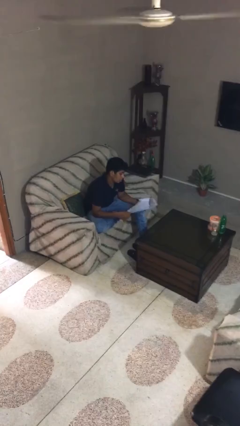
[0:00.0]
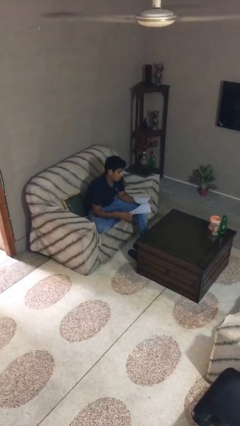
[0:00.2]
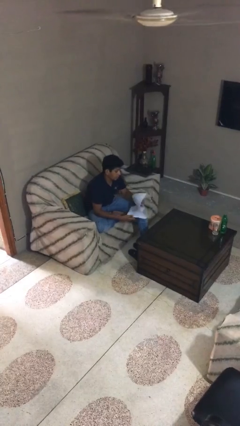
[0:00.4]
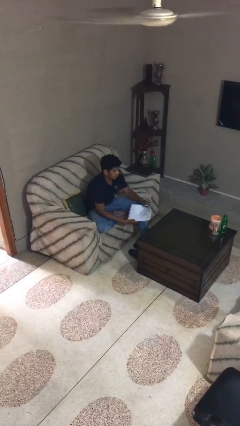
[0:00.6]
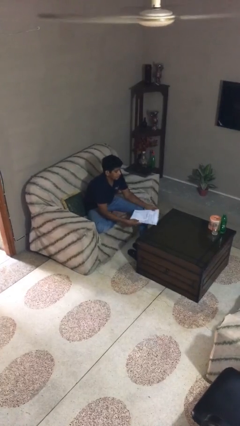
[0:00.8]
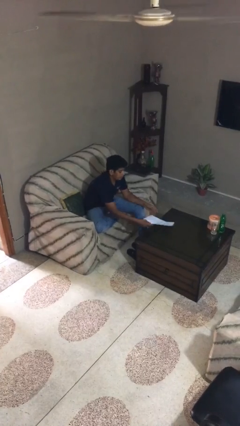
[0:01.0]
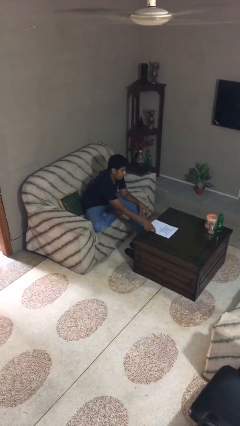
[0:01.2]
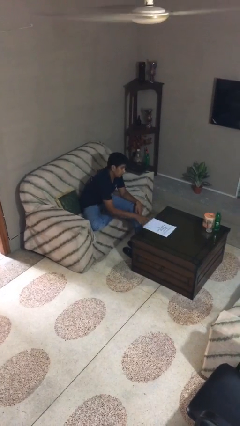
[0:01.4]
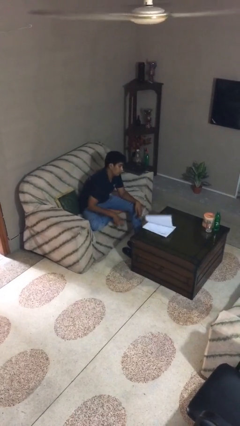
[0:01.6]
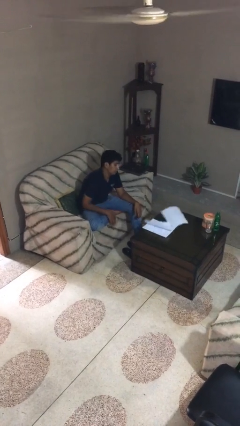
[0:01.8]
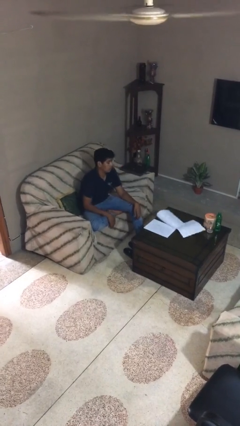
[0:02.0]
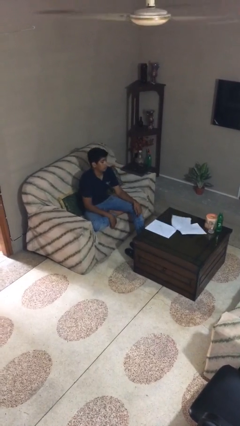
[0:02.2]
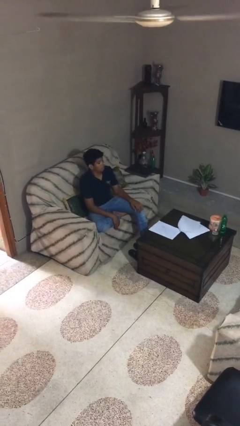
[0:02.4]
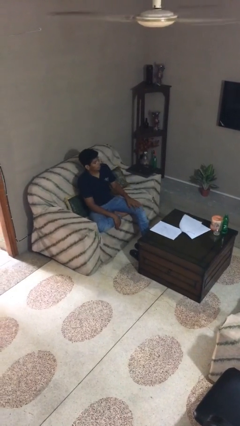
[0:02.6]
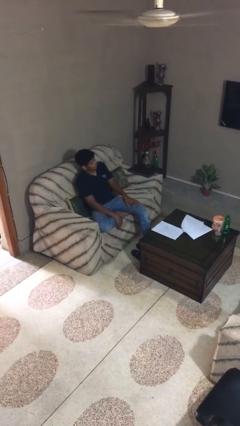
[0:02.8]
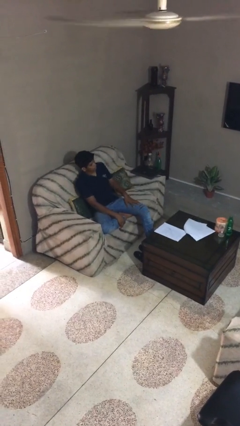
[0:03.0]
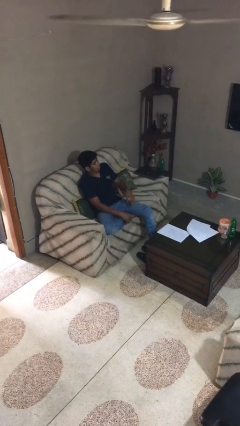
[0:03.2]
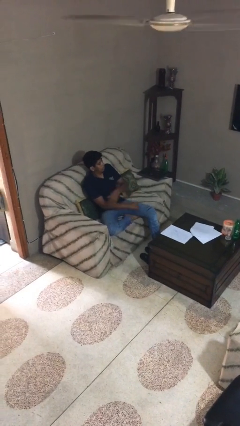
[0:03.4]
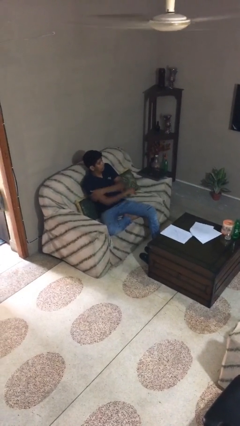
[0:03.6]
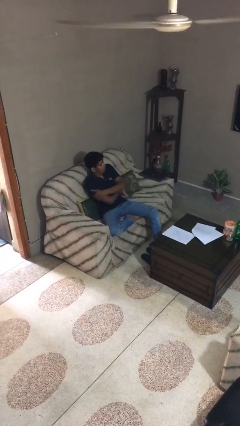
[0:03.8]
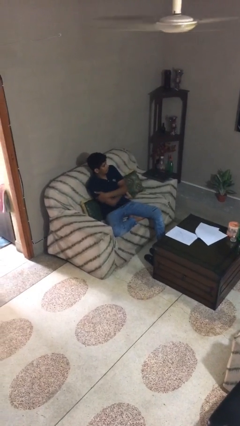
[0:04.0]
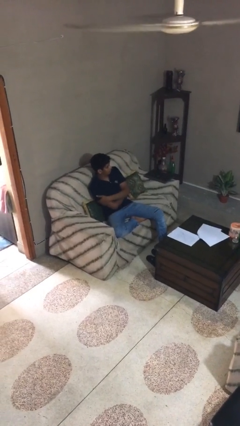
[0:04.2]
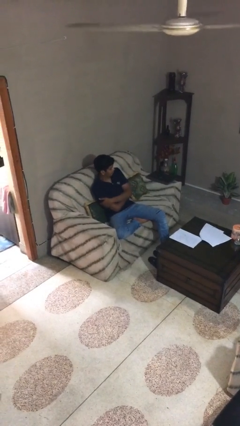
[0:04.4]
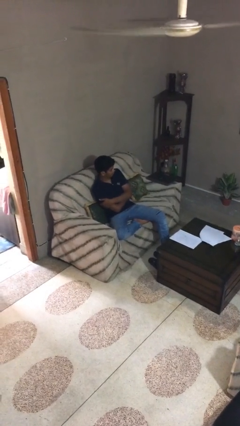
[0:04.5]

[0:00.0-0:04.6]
person puts down object on table

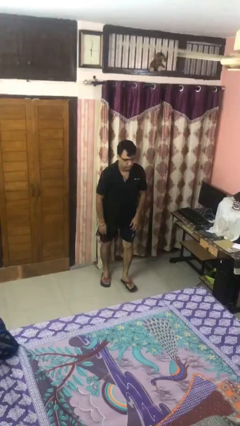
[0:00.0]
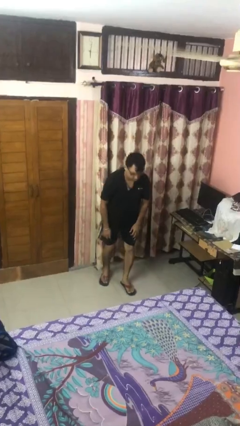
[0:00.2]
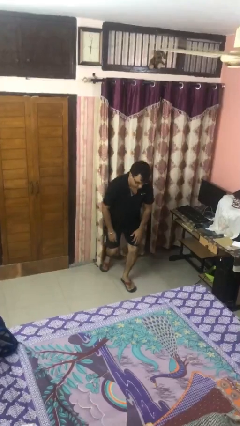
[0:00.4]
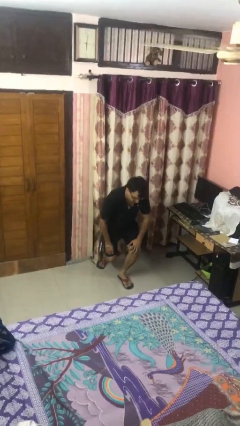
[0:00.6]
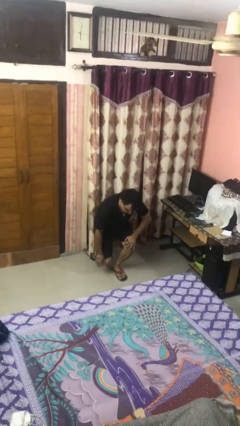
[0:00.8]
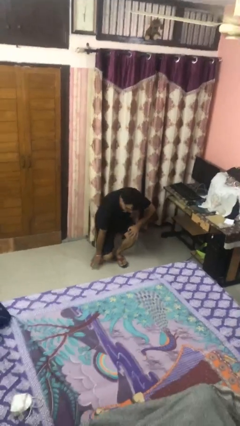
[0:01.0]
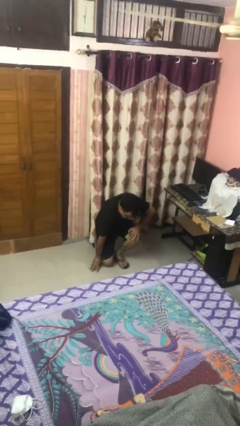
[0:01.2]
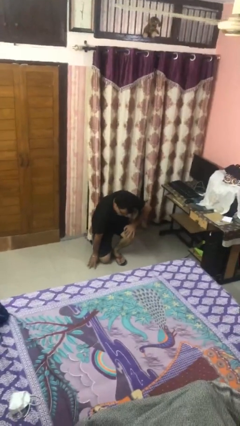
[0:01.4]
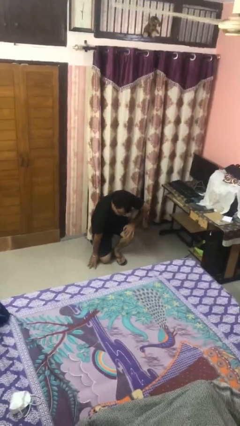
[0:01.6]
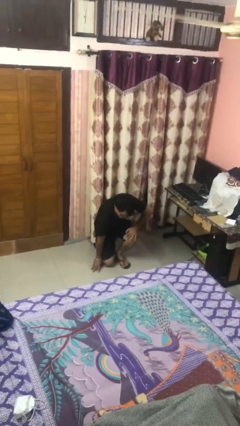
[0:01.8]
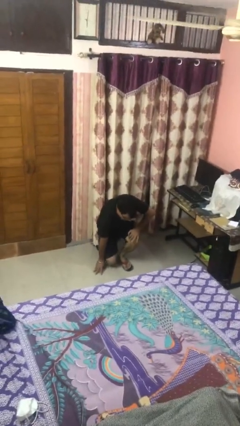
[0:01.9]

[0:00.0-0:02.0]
person kneels

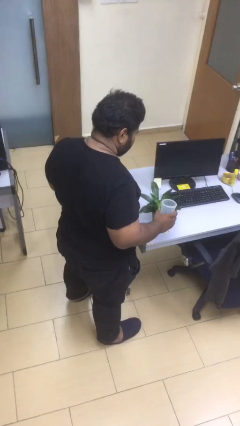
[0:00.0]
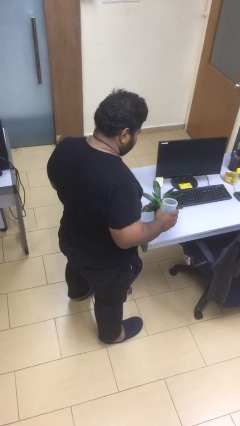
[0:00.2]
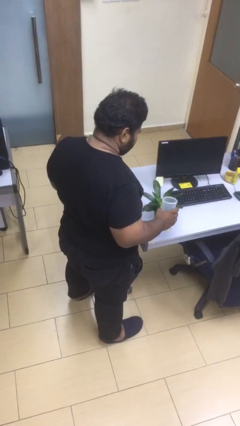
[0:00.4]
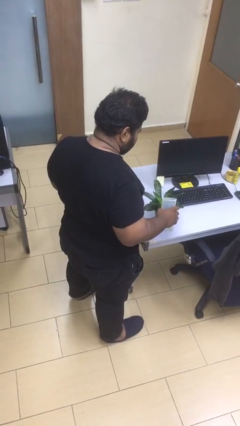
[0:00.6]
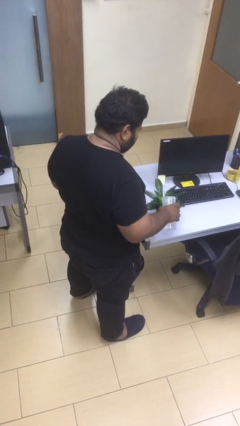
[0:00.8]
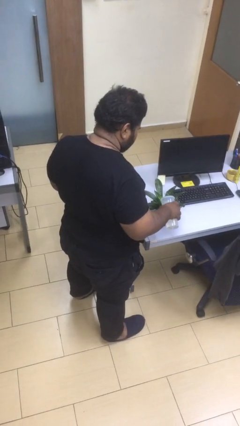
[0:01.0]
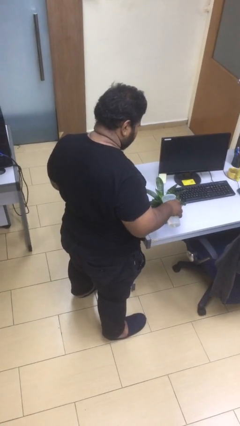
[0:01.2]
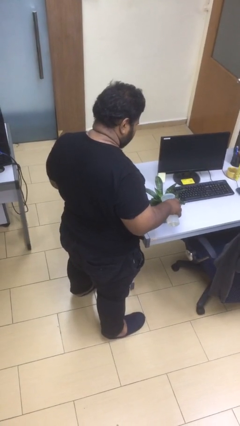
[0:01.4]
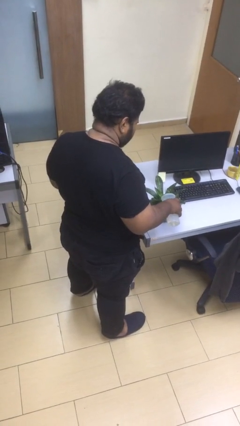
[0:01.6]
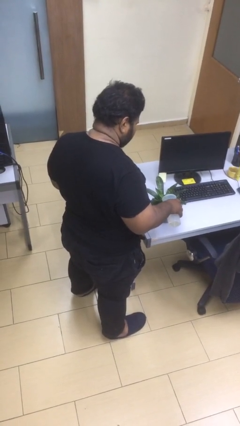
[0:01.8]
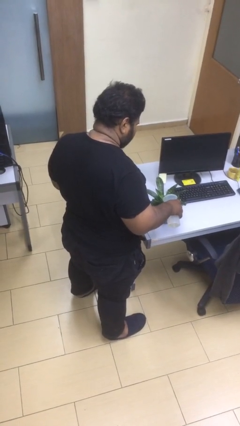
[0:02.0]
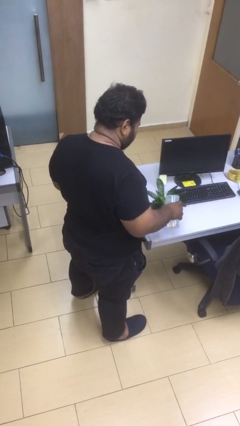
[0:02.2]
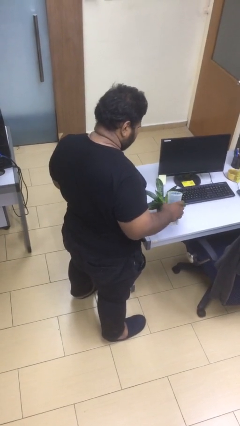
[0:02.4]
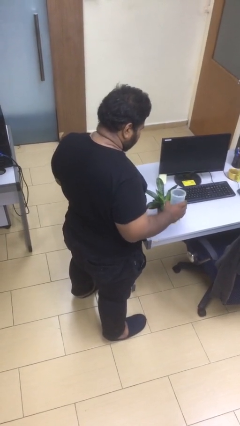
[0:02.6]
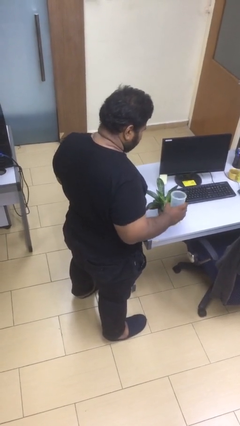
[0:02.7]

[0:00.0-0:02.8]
person waters houseplant

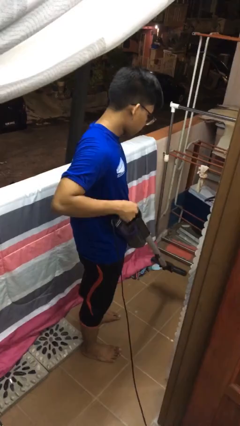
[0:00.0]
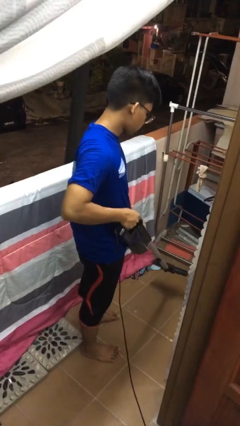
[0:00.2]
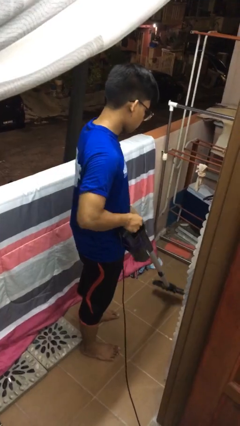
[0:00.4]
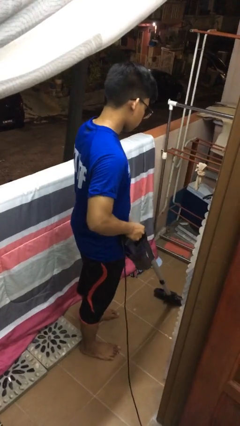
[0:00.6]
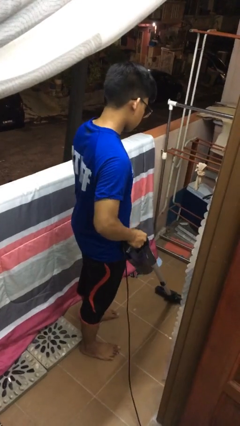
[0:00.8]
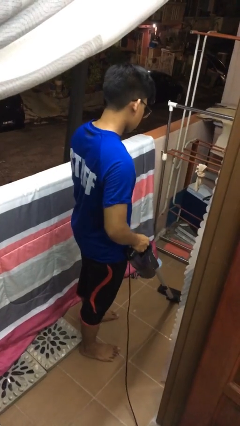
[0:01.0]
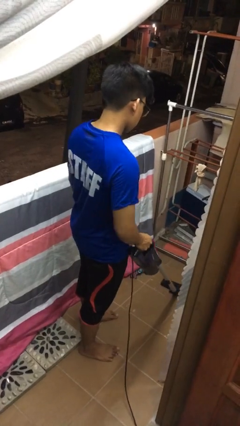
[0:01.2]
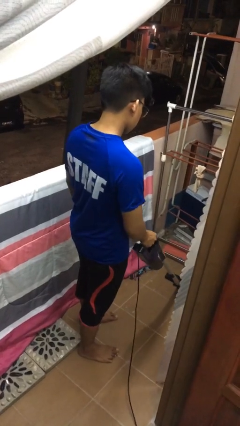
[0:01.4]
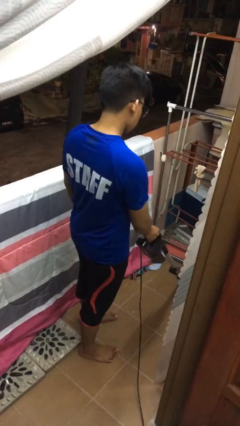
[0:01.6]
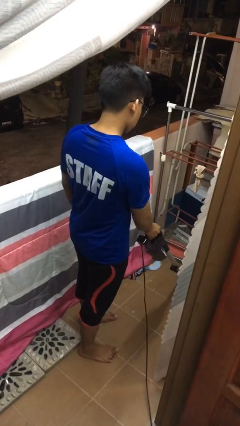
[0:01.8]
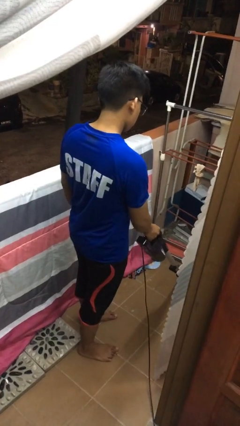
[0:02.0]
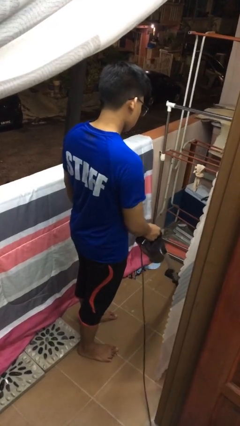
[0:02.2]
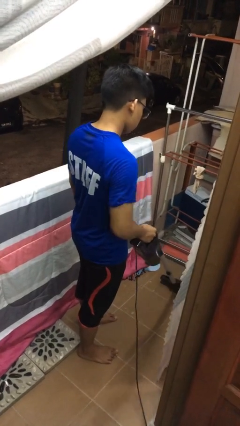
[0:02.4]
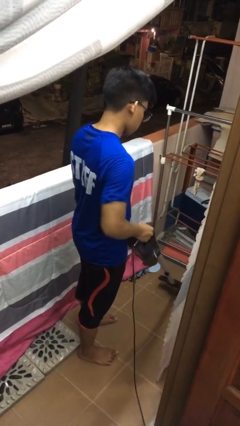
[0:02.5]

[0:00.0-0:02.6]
person vacuums carpet

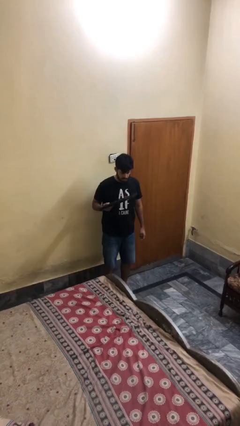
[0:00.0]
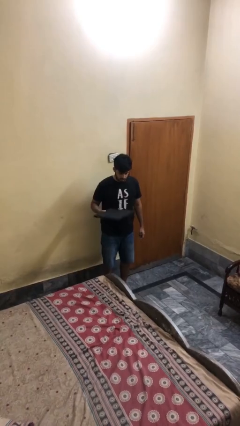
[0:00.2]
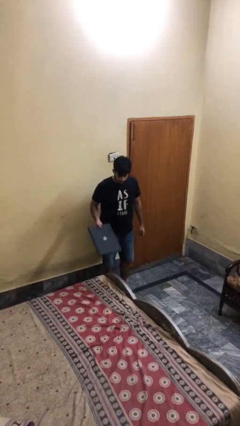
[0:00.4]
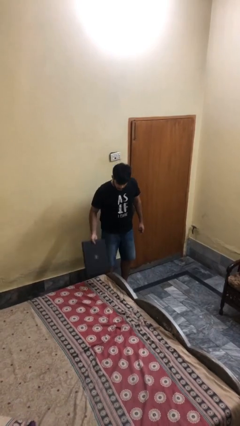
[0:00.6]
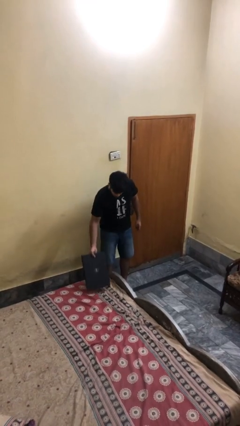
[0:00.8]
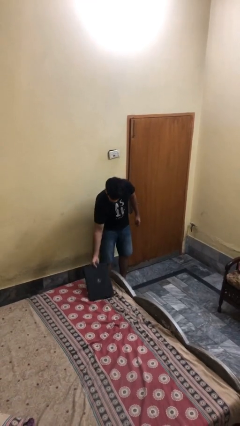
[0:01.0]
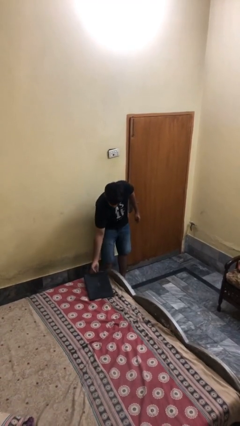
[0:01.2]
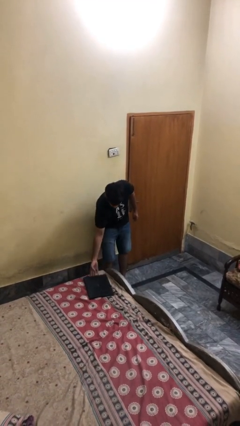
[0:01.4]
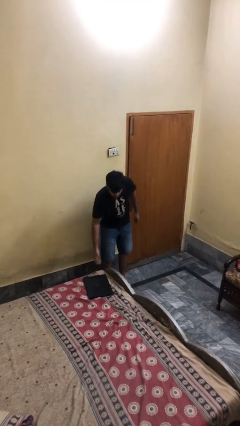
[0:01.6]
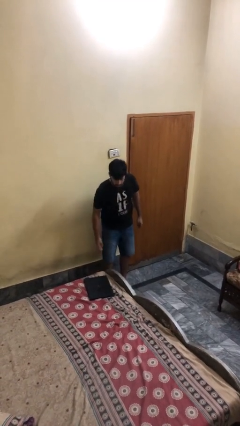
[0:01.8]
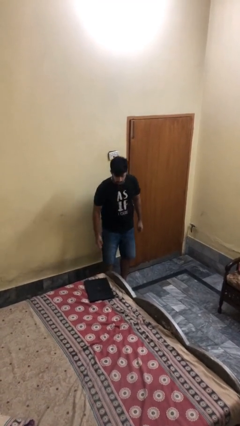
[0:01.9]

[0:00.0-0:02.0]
person puts down object on bed

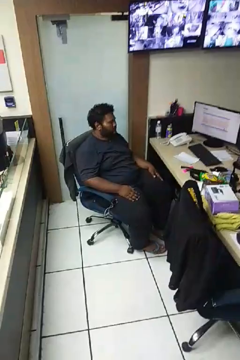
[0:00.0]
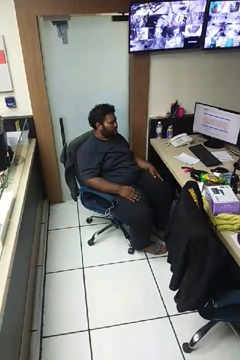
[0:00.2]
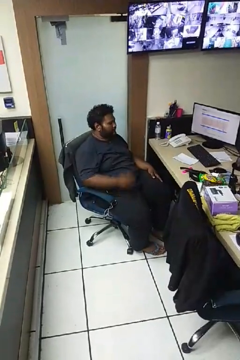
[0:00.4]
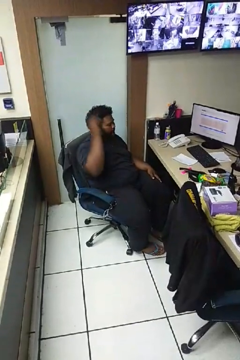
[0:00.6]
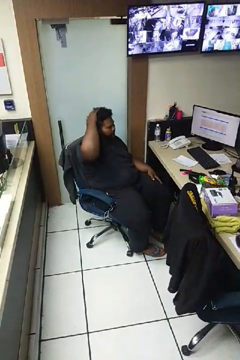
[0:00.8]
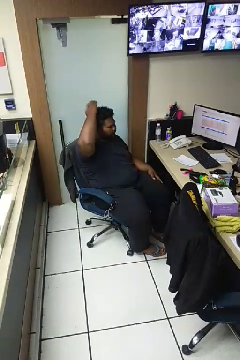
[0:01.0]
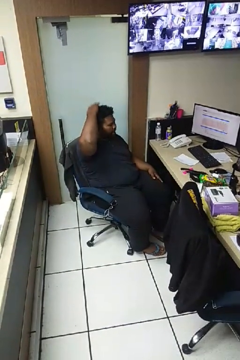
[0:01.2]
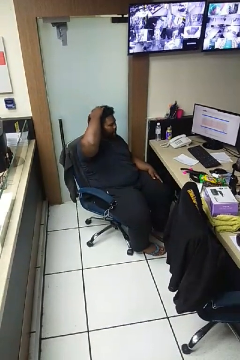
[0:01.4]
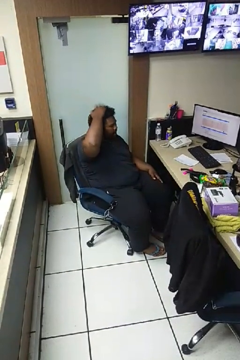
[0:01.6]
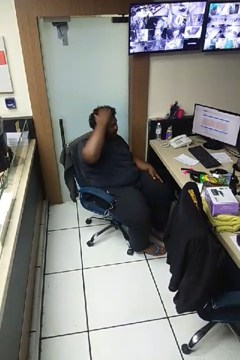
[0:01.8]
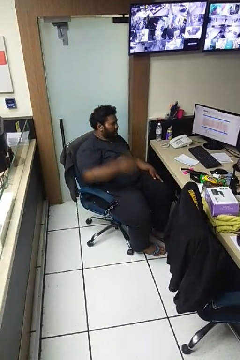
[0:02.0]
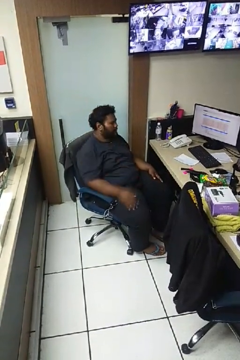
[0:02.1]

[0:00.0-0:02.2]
person pats head

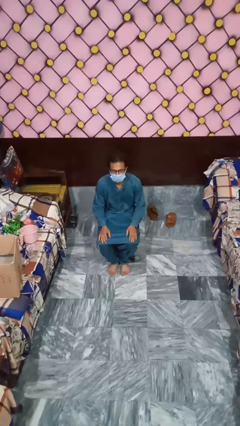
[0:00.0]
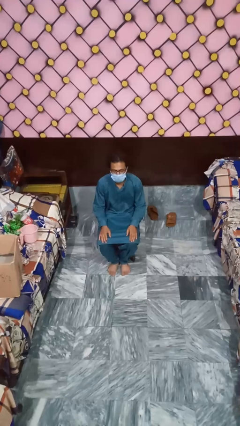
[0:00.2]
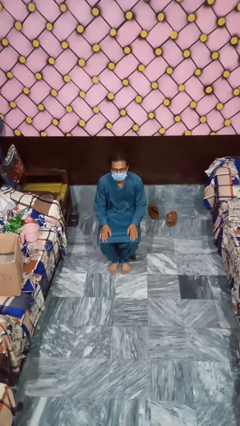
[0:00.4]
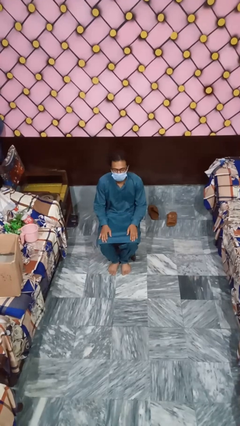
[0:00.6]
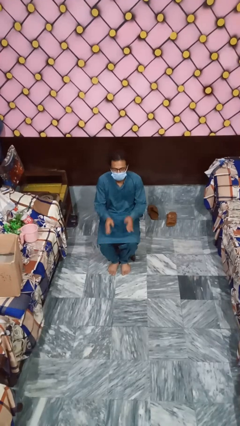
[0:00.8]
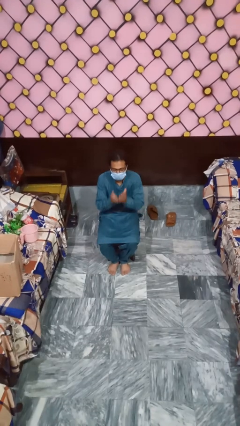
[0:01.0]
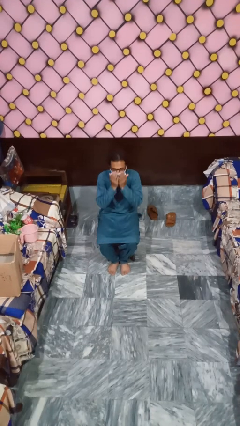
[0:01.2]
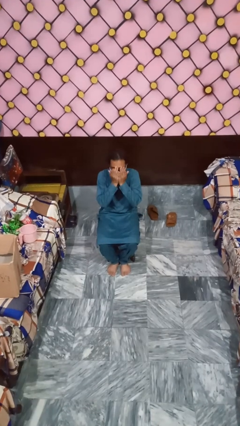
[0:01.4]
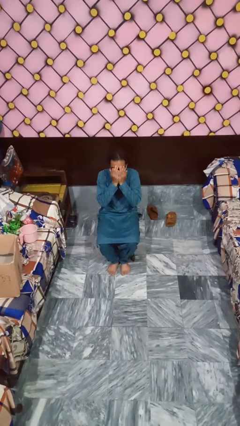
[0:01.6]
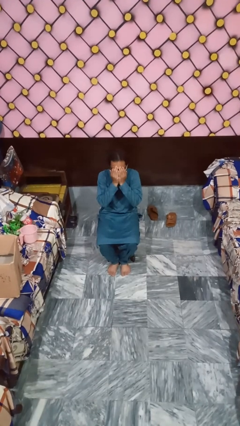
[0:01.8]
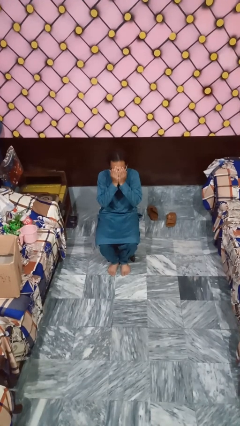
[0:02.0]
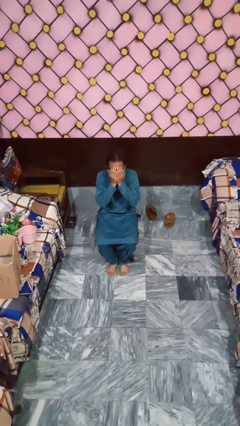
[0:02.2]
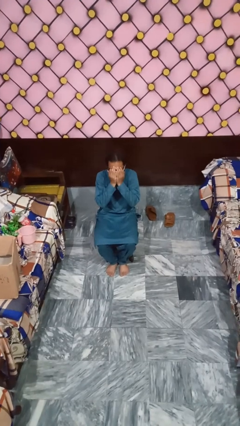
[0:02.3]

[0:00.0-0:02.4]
person covers face with hands
